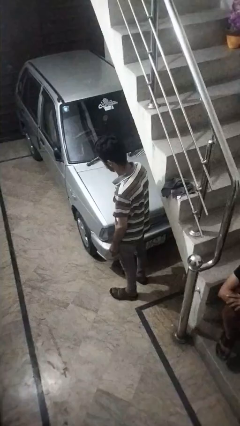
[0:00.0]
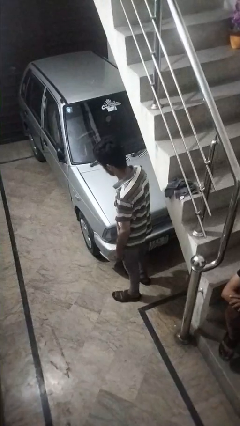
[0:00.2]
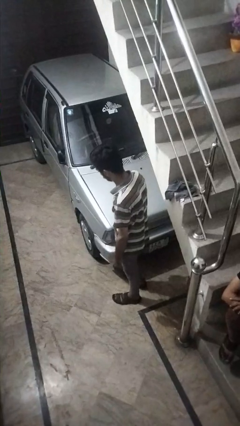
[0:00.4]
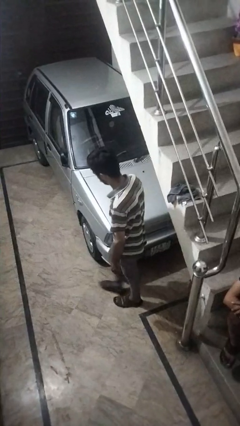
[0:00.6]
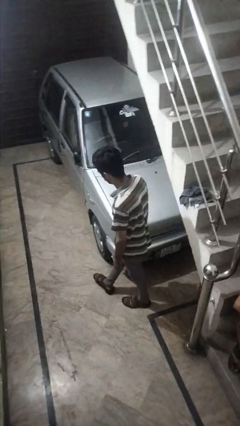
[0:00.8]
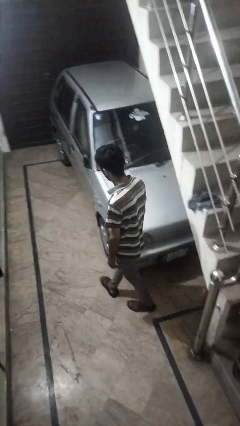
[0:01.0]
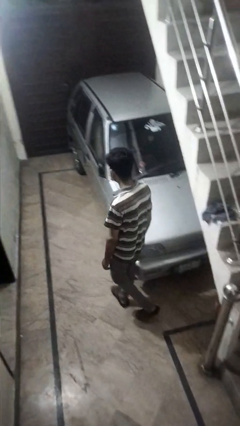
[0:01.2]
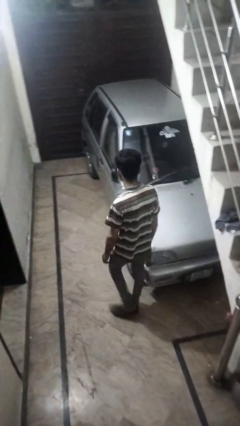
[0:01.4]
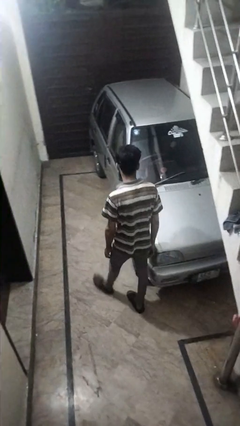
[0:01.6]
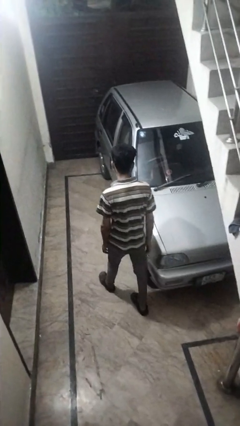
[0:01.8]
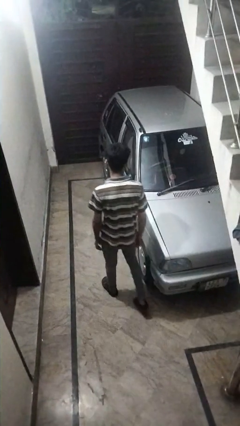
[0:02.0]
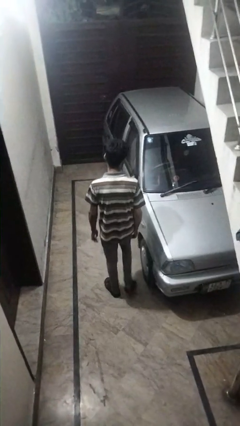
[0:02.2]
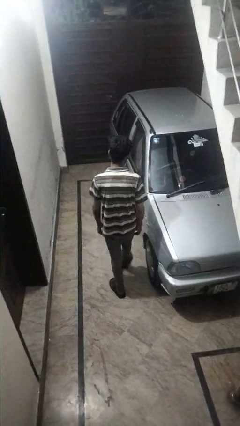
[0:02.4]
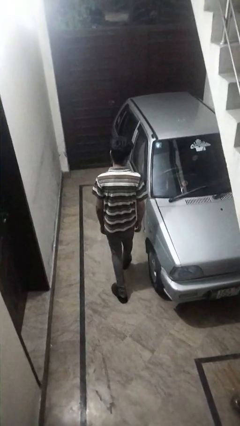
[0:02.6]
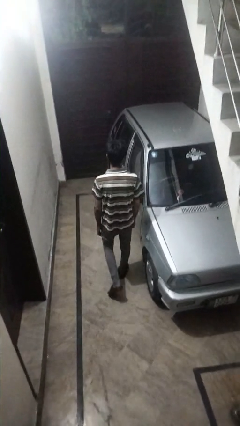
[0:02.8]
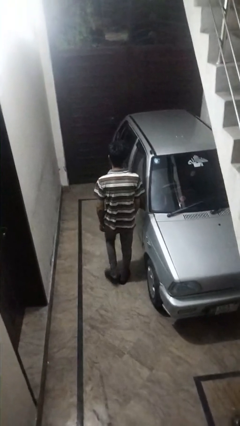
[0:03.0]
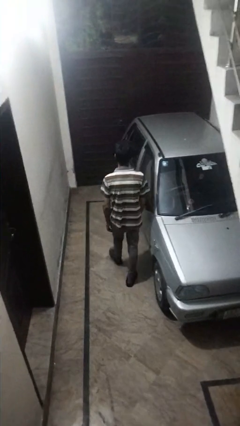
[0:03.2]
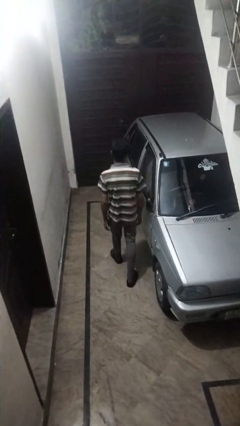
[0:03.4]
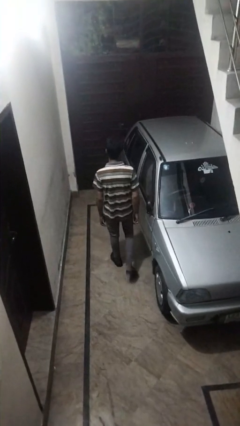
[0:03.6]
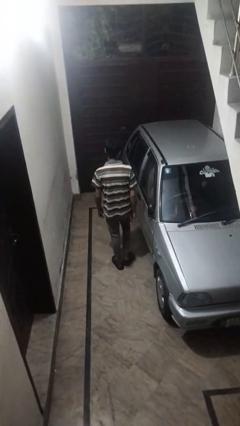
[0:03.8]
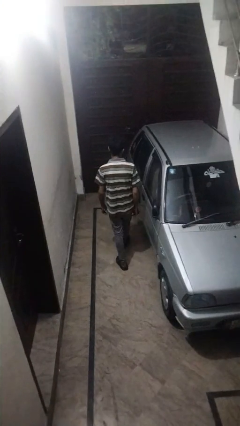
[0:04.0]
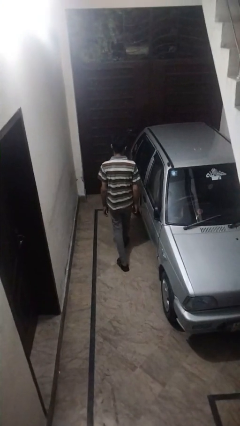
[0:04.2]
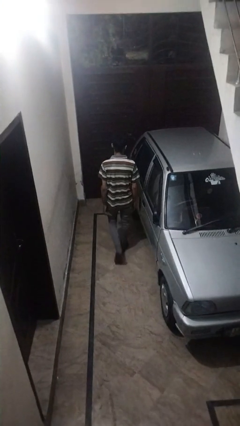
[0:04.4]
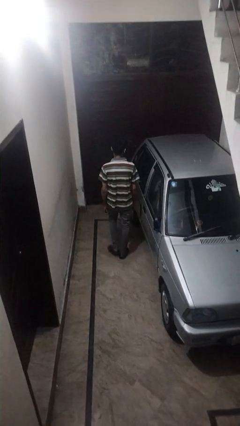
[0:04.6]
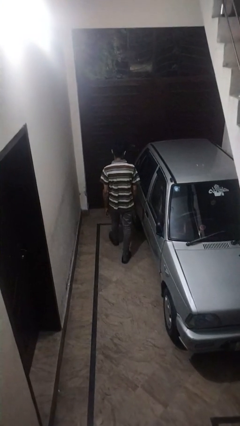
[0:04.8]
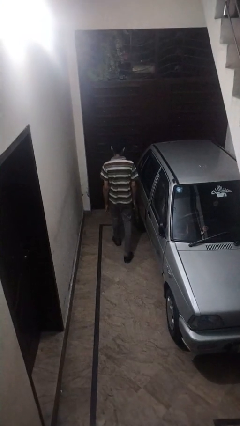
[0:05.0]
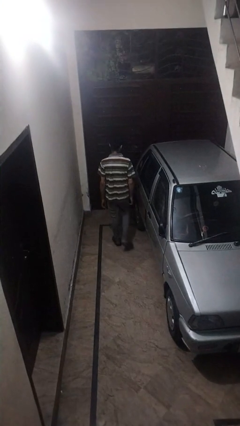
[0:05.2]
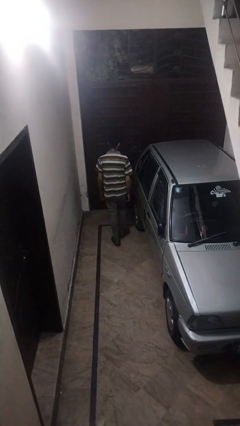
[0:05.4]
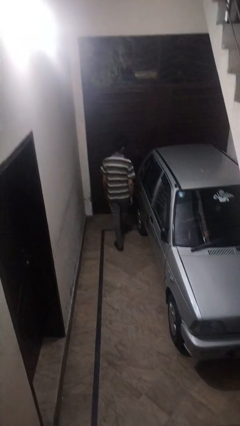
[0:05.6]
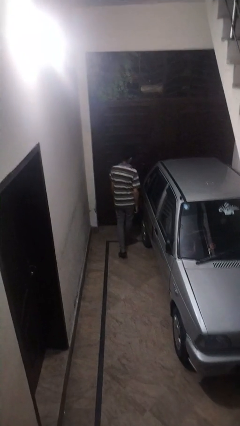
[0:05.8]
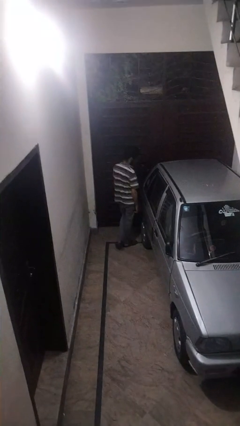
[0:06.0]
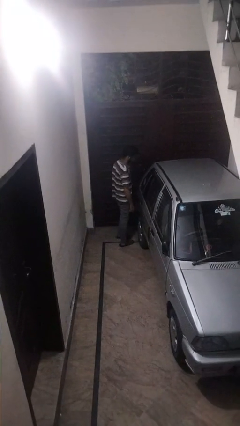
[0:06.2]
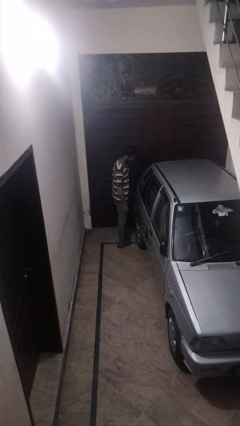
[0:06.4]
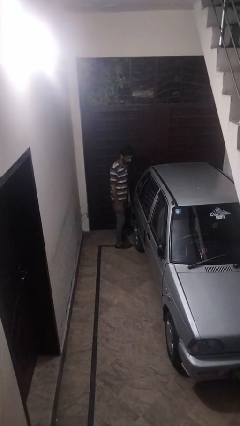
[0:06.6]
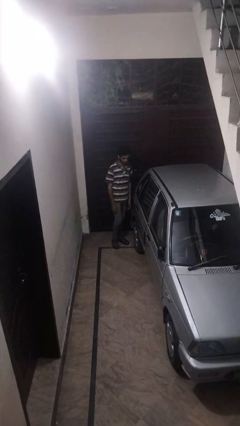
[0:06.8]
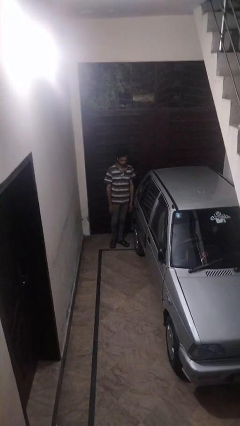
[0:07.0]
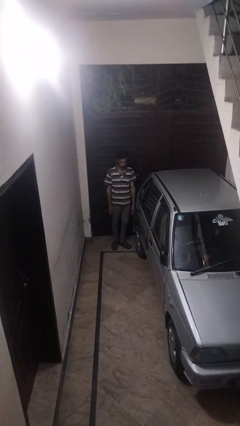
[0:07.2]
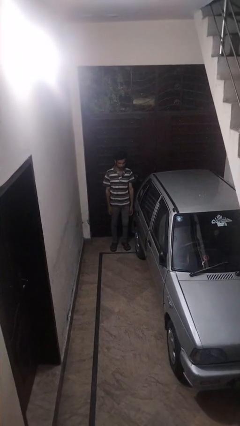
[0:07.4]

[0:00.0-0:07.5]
person walks around car

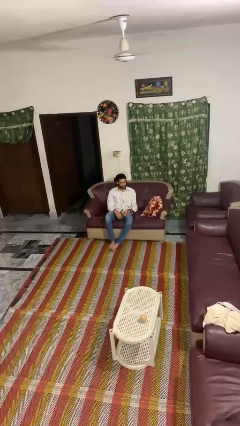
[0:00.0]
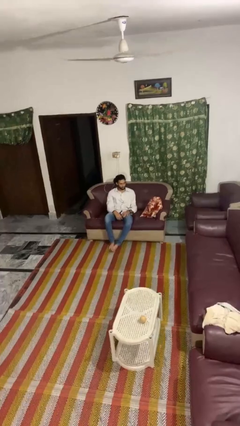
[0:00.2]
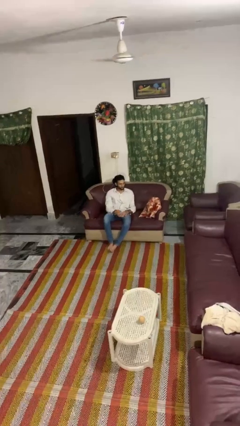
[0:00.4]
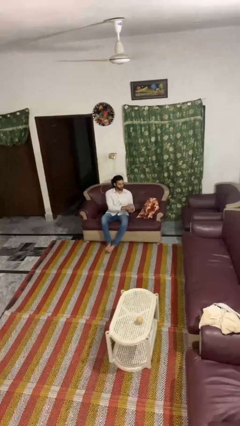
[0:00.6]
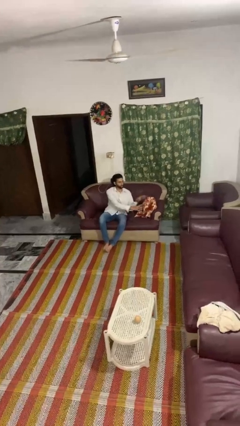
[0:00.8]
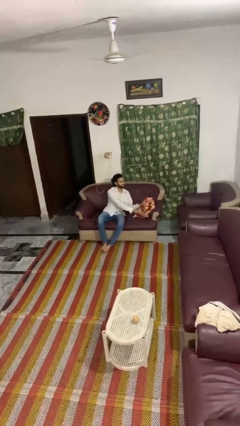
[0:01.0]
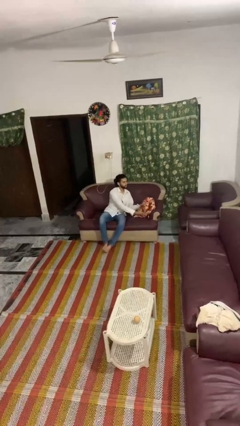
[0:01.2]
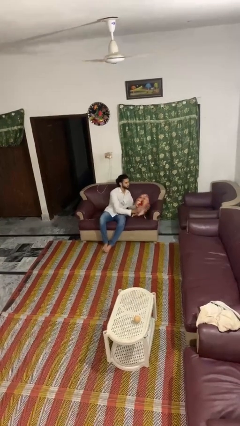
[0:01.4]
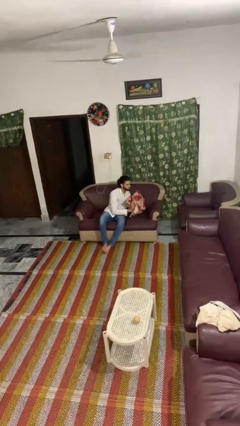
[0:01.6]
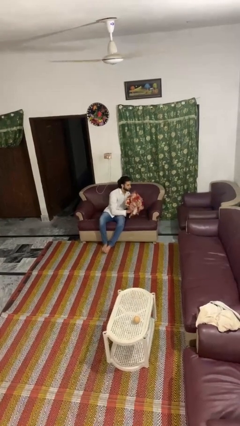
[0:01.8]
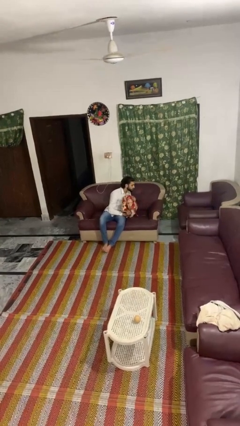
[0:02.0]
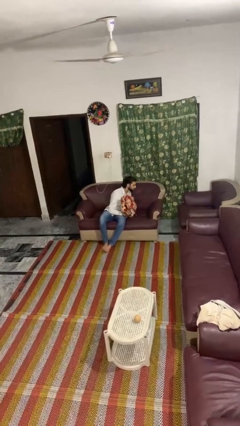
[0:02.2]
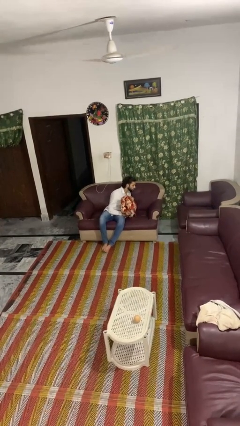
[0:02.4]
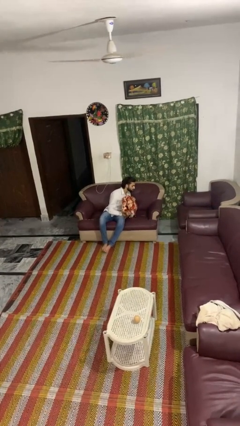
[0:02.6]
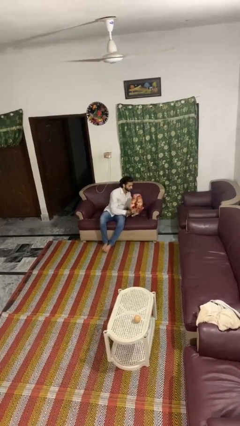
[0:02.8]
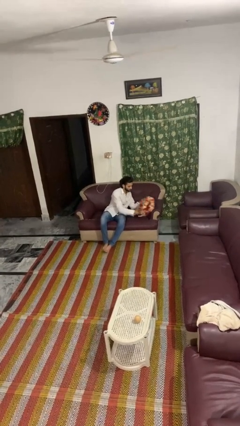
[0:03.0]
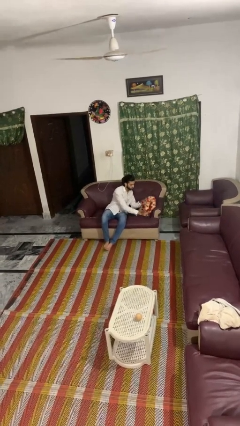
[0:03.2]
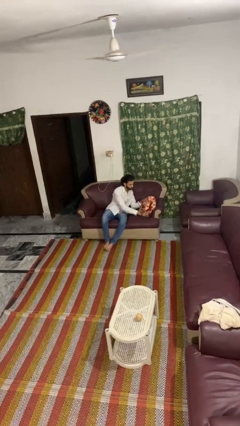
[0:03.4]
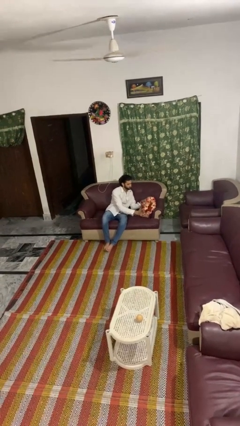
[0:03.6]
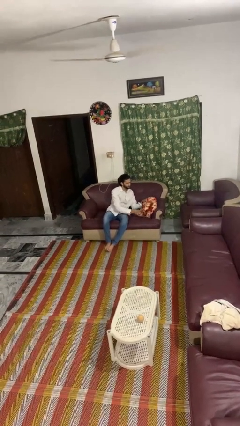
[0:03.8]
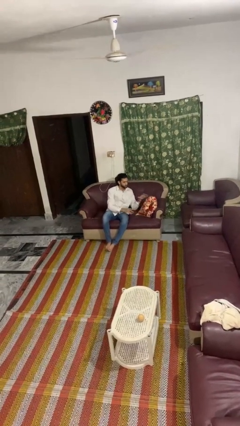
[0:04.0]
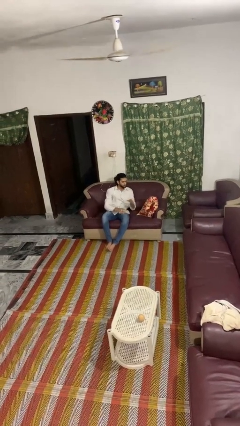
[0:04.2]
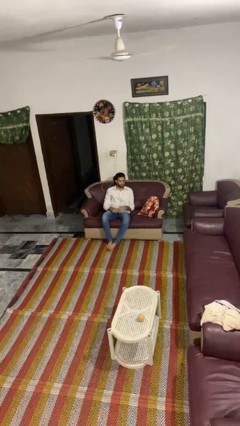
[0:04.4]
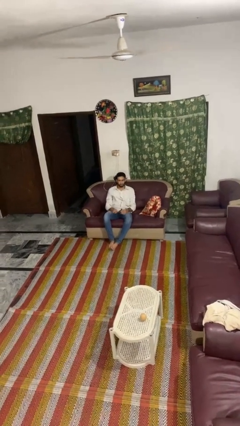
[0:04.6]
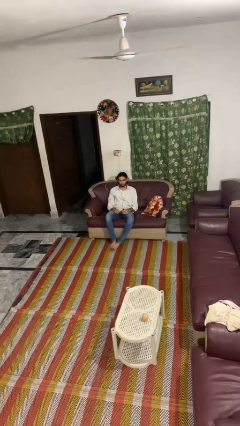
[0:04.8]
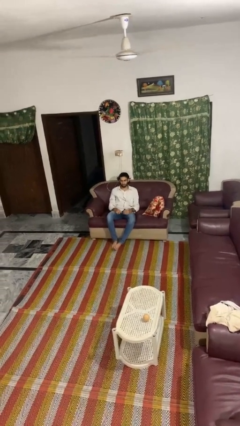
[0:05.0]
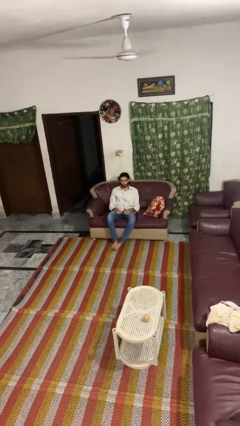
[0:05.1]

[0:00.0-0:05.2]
person searches in couch

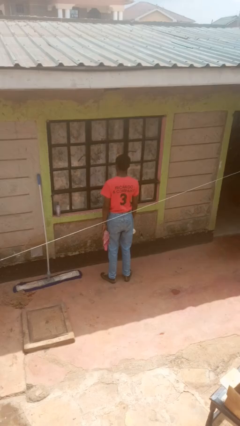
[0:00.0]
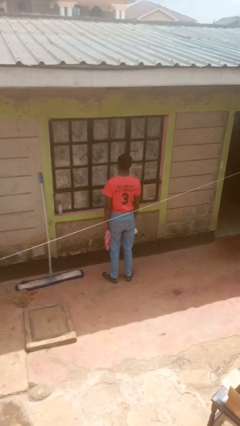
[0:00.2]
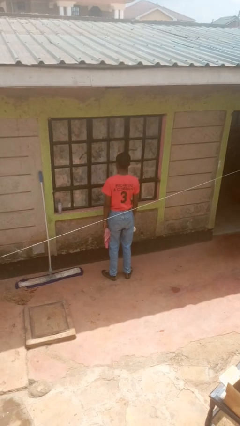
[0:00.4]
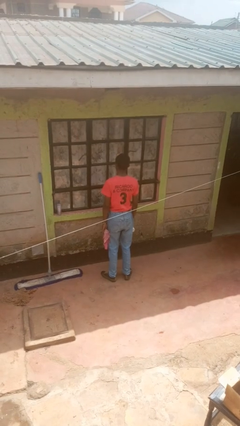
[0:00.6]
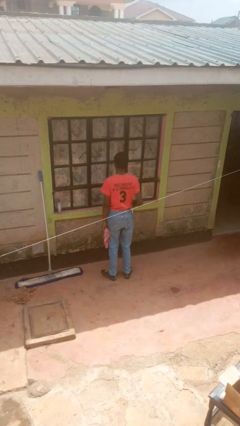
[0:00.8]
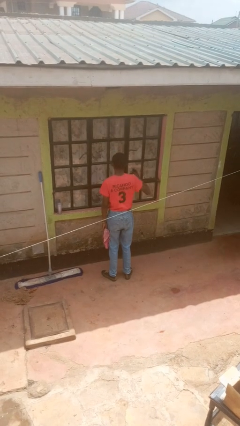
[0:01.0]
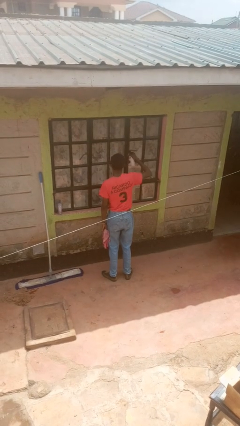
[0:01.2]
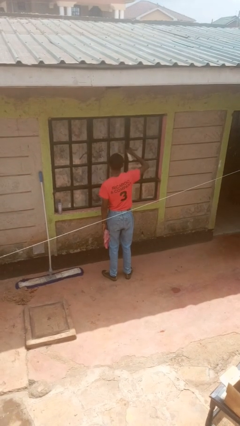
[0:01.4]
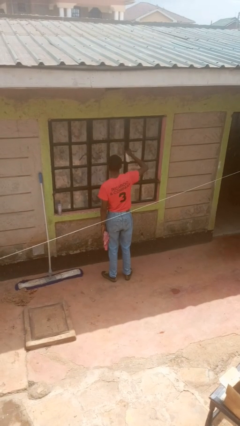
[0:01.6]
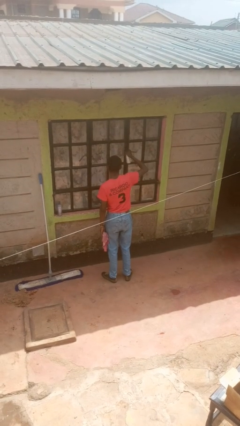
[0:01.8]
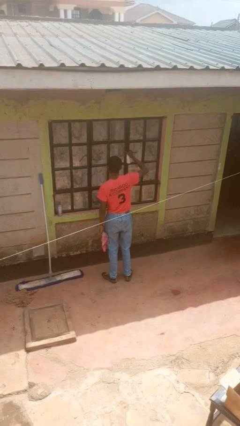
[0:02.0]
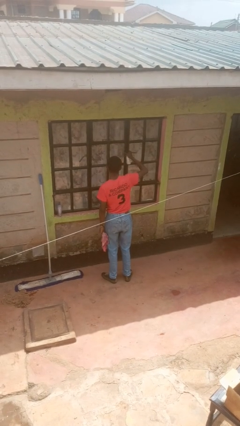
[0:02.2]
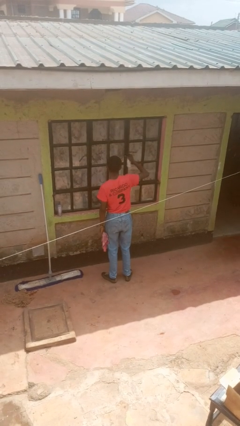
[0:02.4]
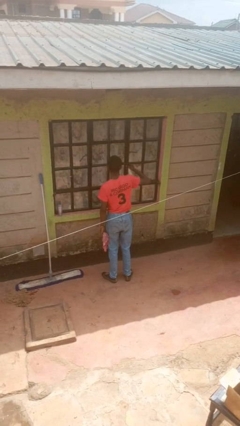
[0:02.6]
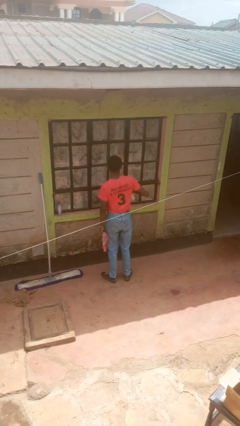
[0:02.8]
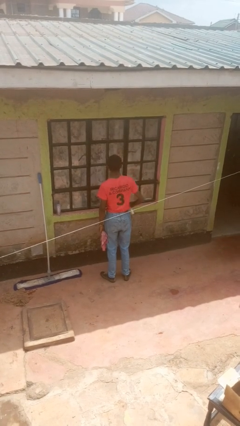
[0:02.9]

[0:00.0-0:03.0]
person sprays from bottle

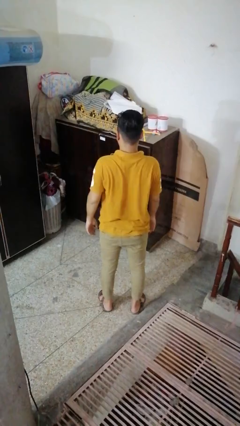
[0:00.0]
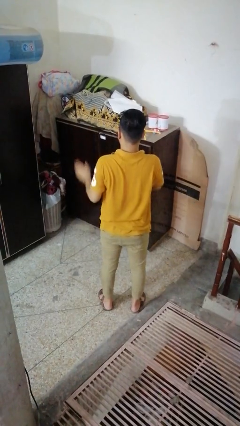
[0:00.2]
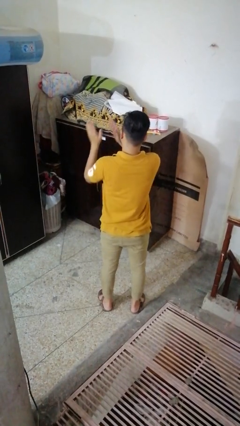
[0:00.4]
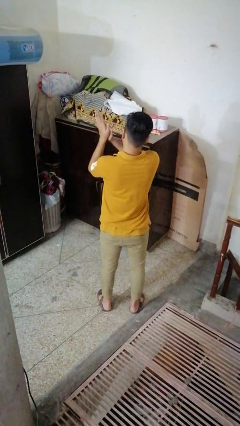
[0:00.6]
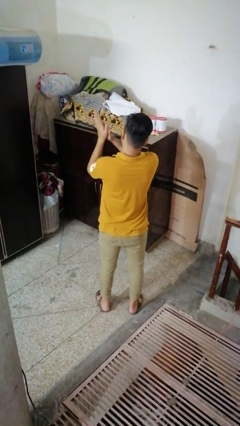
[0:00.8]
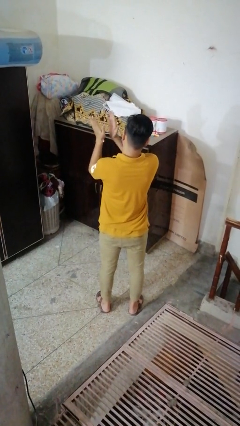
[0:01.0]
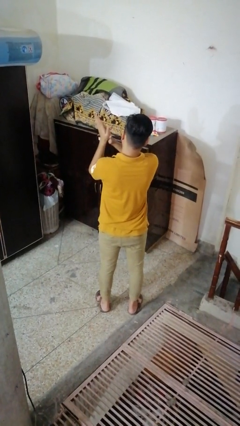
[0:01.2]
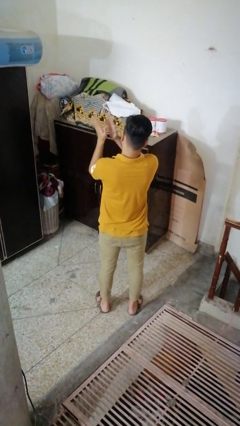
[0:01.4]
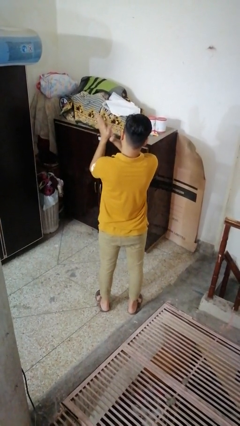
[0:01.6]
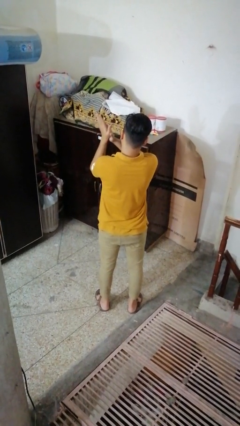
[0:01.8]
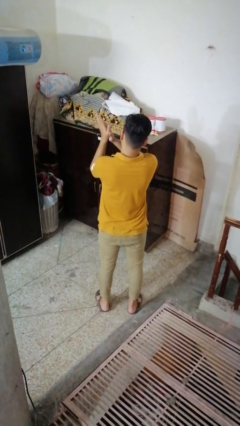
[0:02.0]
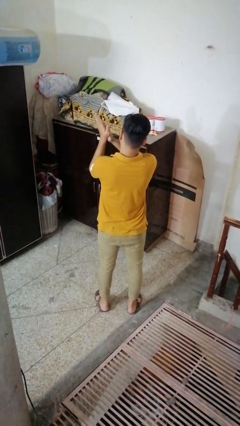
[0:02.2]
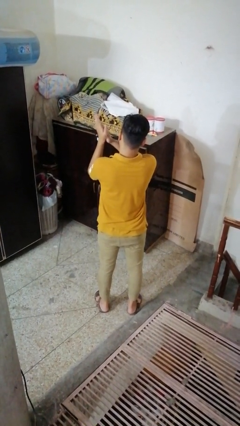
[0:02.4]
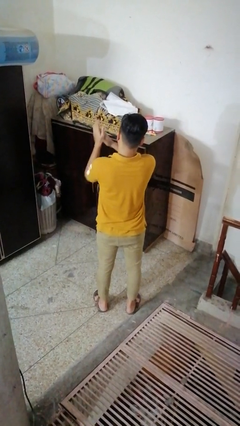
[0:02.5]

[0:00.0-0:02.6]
person claps hands

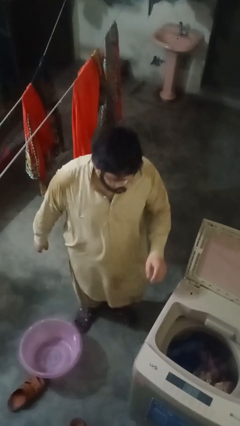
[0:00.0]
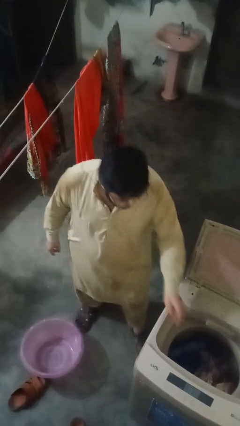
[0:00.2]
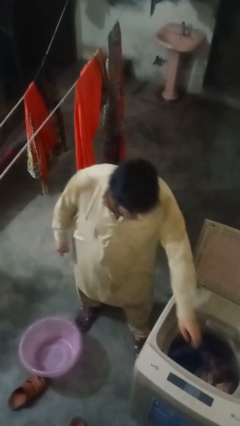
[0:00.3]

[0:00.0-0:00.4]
person loads clotheswasher
